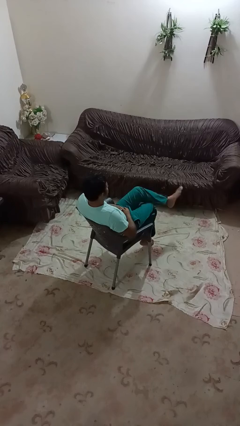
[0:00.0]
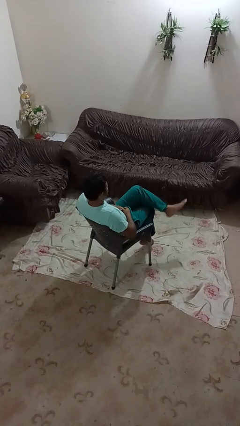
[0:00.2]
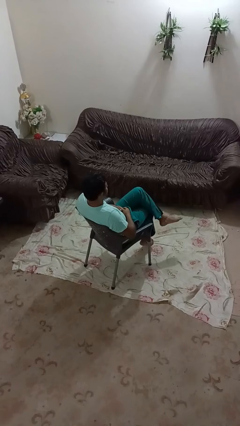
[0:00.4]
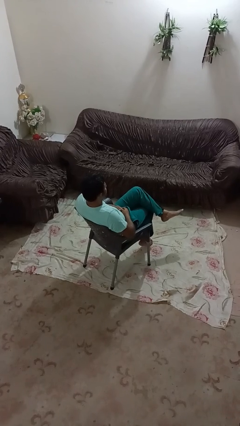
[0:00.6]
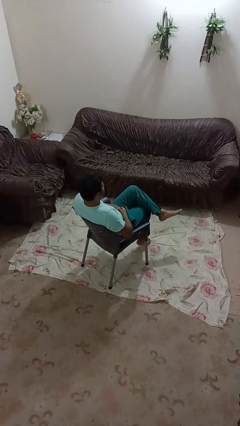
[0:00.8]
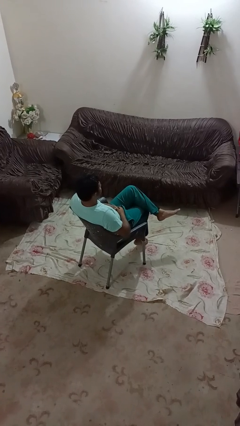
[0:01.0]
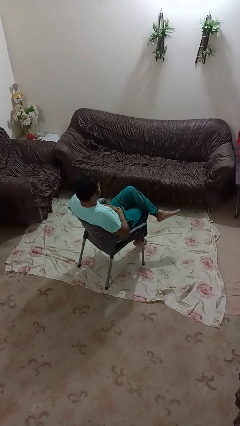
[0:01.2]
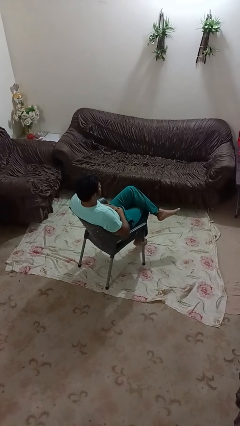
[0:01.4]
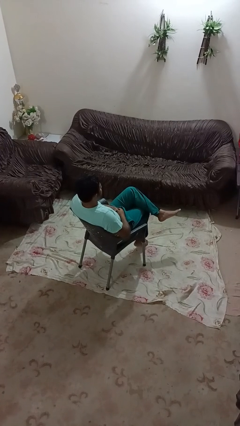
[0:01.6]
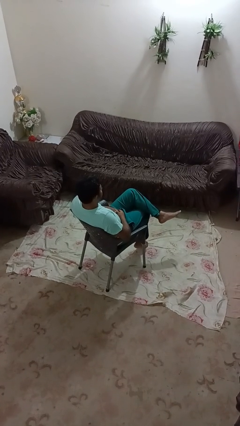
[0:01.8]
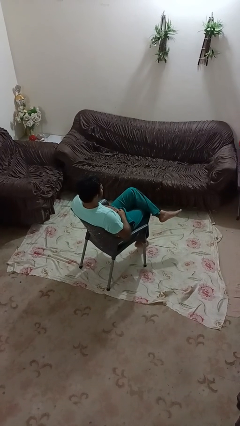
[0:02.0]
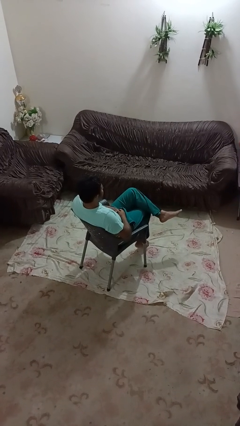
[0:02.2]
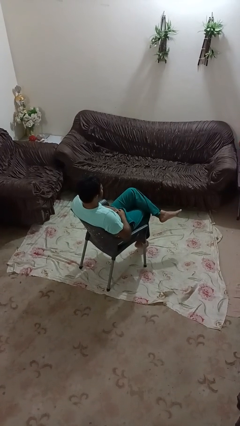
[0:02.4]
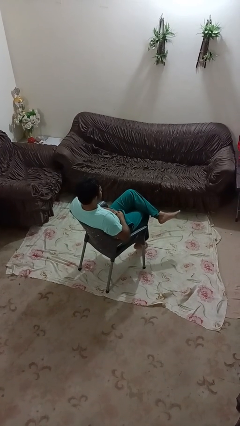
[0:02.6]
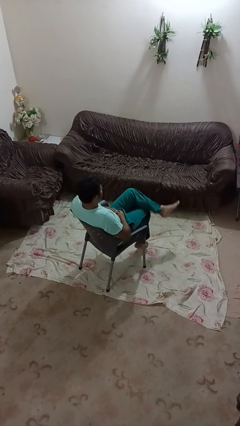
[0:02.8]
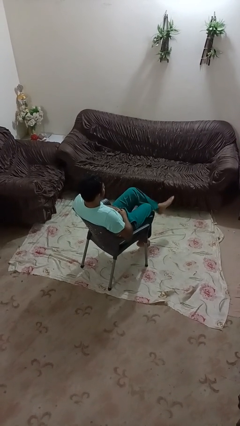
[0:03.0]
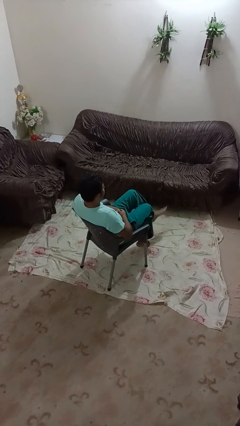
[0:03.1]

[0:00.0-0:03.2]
person crosses legs

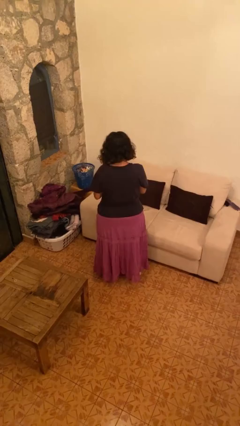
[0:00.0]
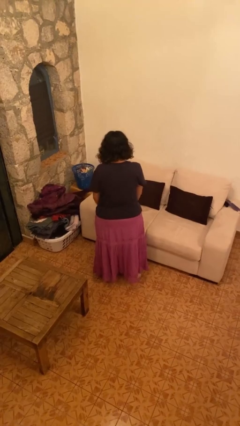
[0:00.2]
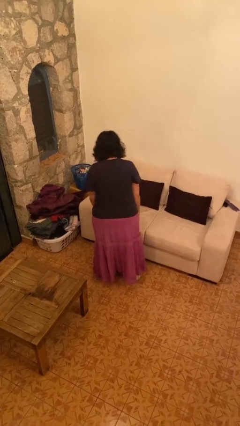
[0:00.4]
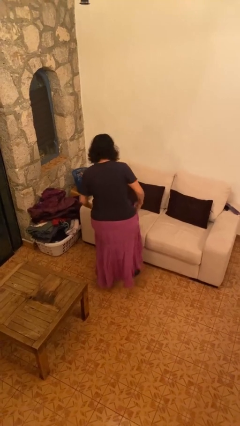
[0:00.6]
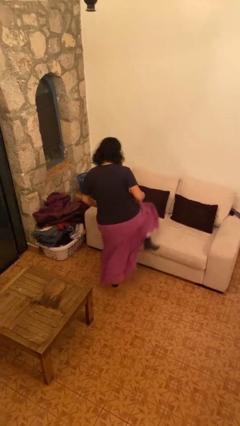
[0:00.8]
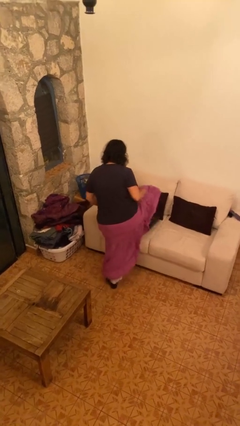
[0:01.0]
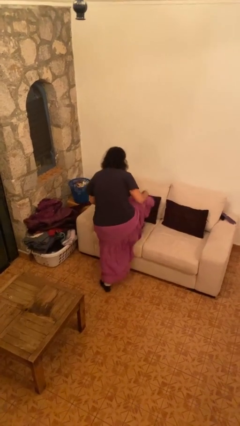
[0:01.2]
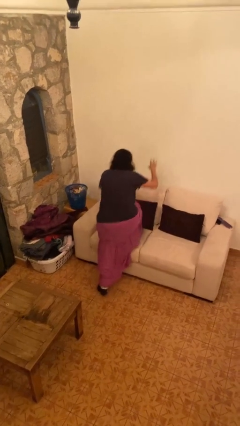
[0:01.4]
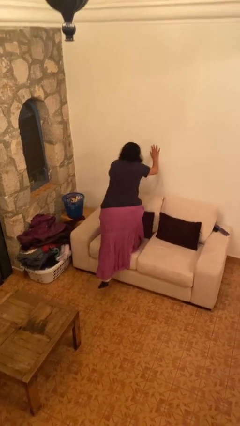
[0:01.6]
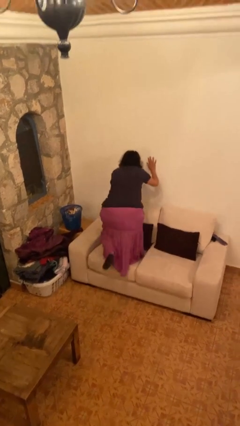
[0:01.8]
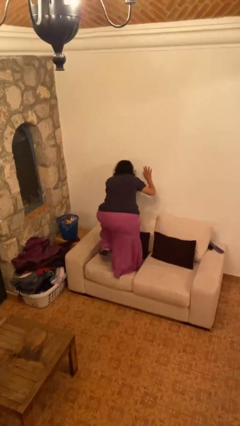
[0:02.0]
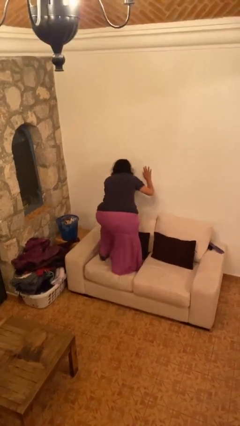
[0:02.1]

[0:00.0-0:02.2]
person climbs on couch

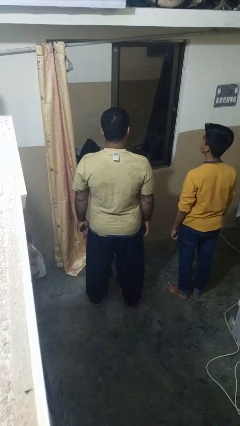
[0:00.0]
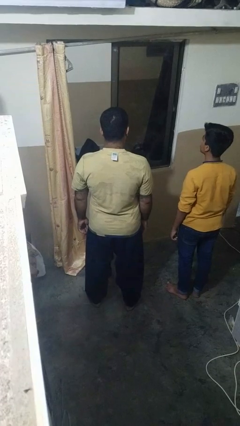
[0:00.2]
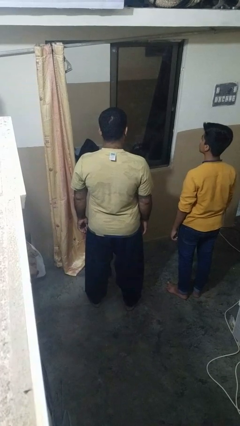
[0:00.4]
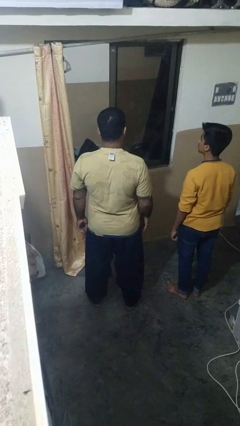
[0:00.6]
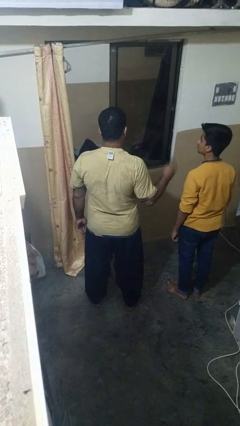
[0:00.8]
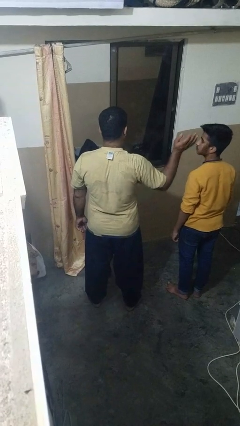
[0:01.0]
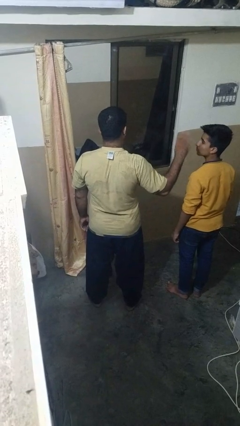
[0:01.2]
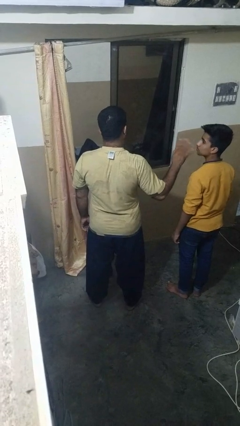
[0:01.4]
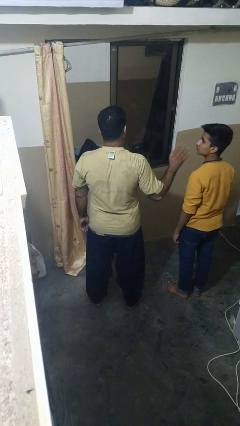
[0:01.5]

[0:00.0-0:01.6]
person waves at person

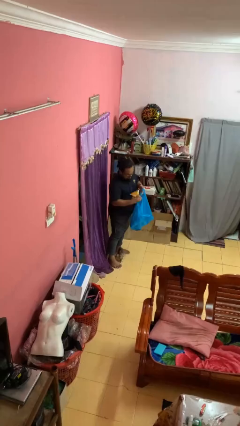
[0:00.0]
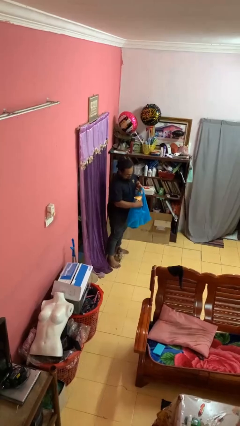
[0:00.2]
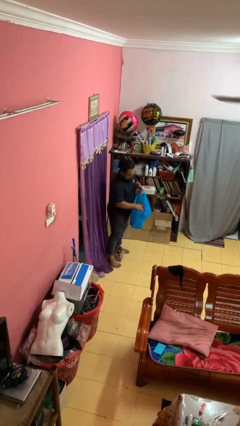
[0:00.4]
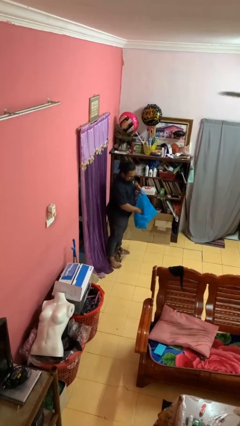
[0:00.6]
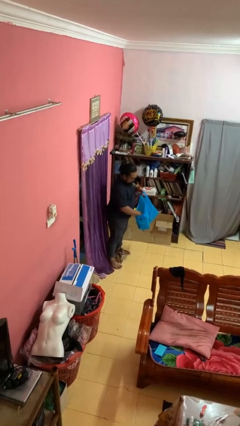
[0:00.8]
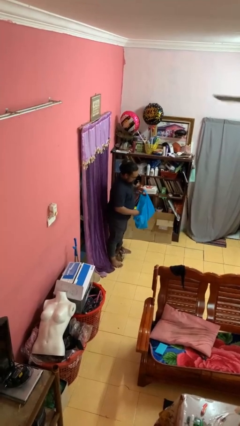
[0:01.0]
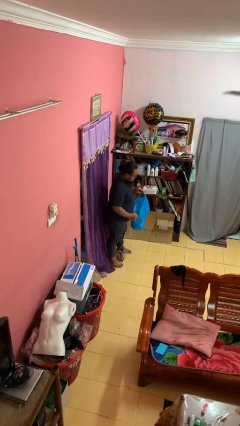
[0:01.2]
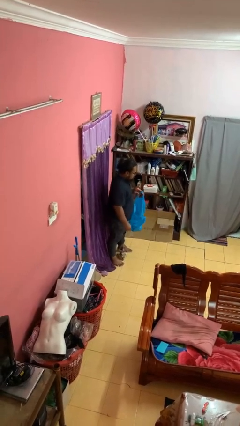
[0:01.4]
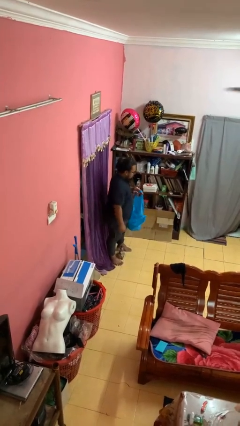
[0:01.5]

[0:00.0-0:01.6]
person puts object into bag

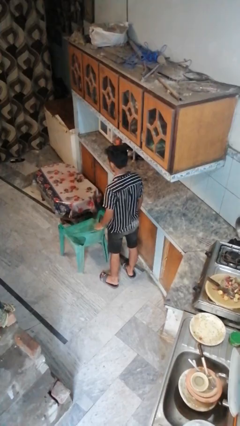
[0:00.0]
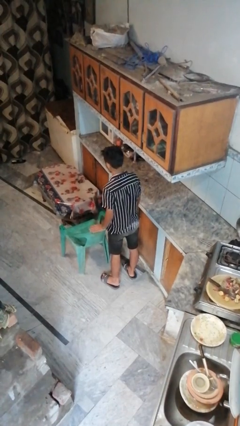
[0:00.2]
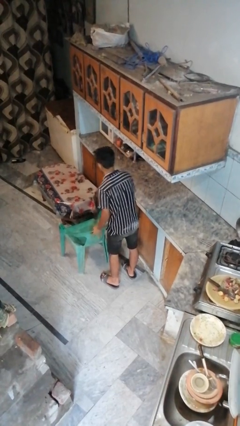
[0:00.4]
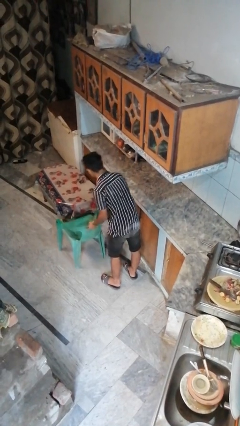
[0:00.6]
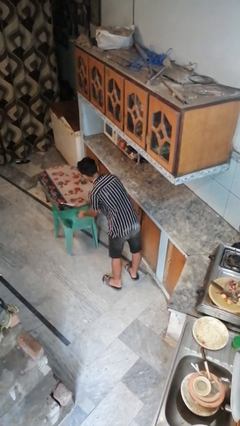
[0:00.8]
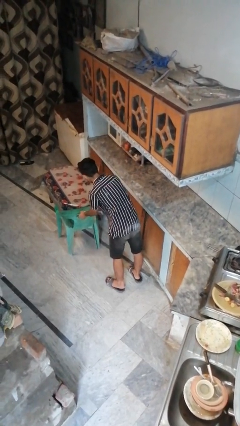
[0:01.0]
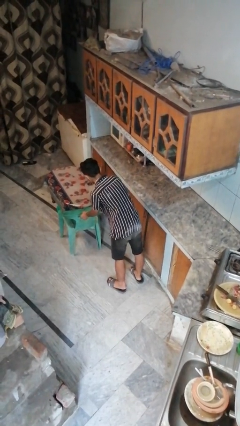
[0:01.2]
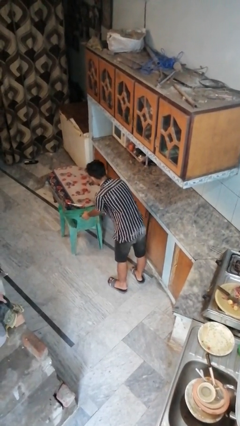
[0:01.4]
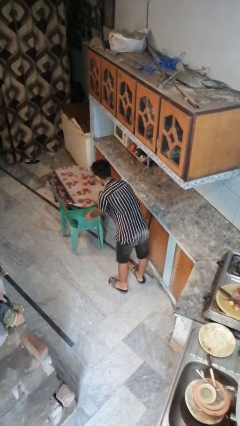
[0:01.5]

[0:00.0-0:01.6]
person pushes in chair

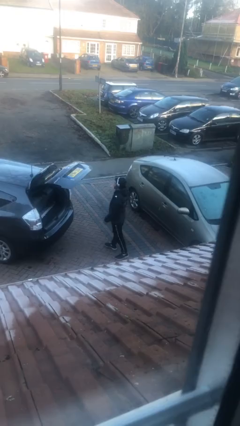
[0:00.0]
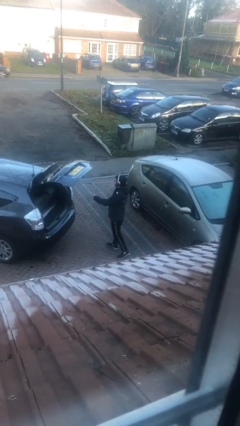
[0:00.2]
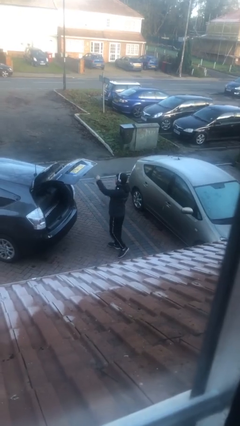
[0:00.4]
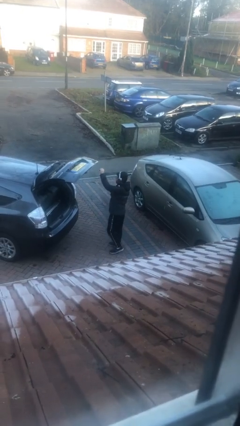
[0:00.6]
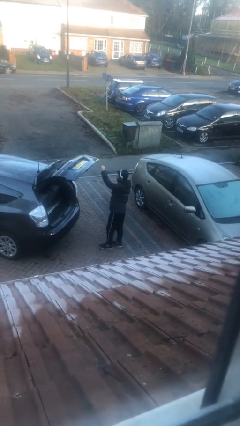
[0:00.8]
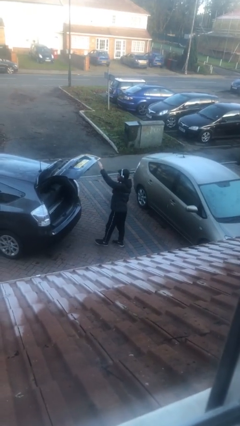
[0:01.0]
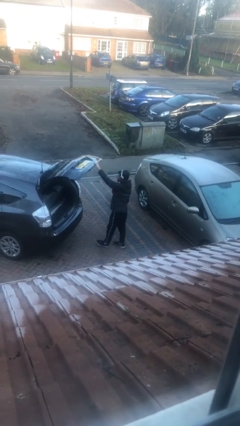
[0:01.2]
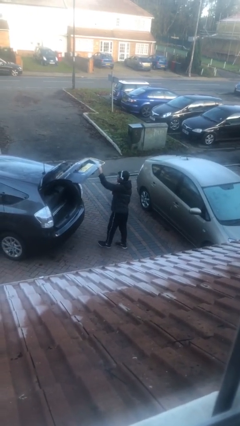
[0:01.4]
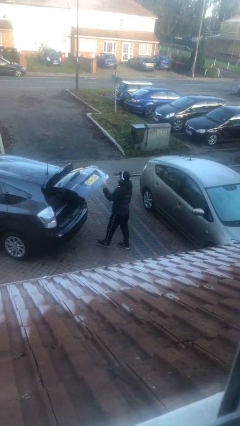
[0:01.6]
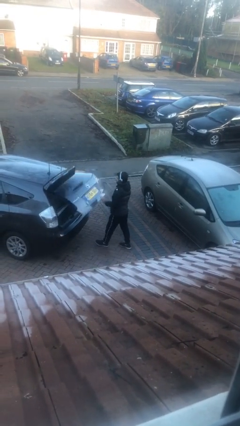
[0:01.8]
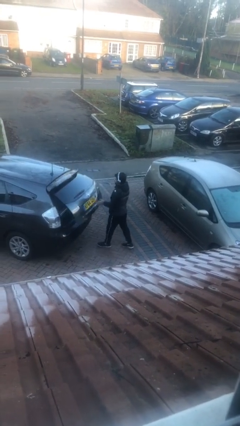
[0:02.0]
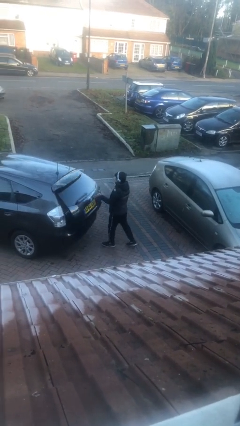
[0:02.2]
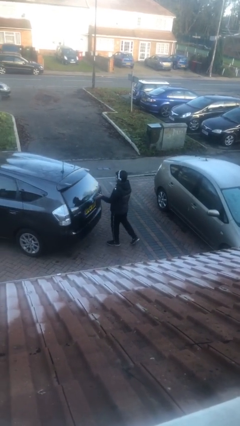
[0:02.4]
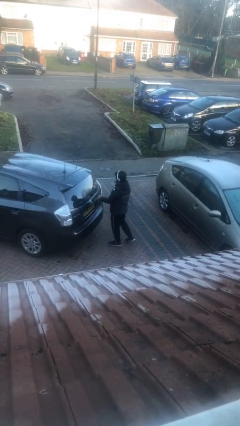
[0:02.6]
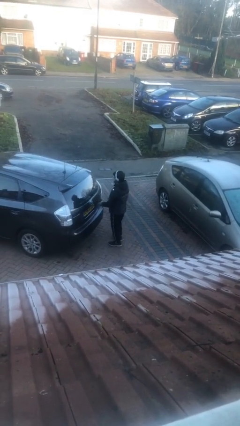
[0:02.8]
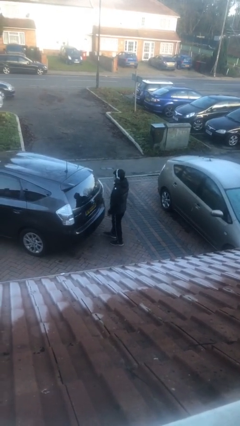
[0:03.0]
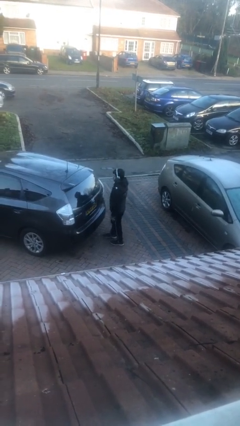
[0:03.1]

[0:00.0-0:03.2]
person closes car trunk

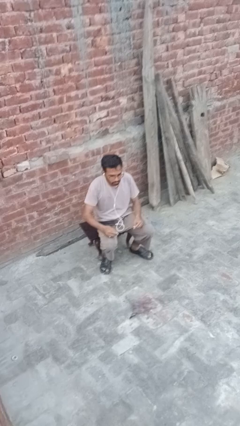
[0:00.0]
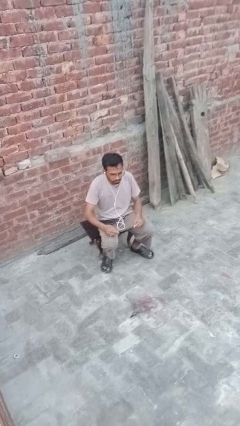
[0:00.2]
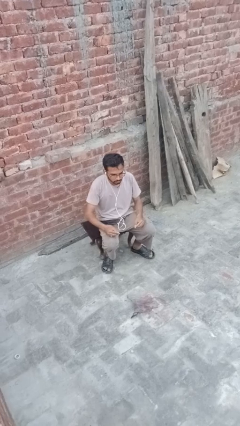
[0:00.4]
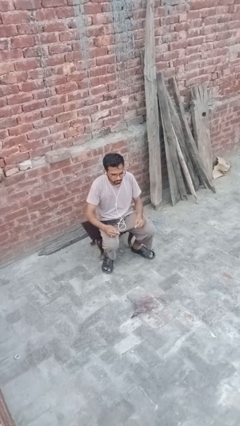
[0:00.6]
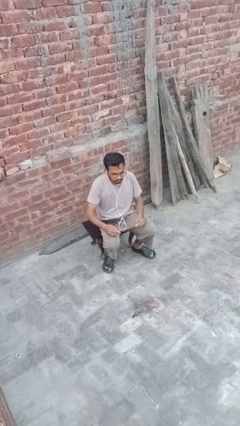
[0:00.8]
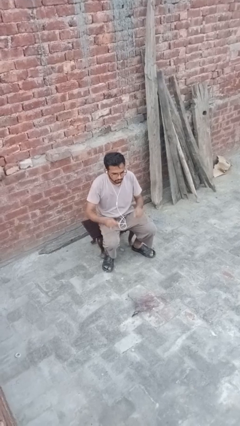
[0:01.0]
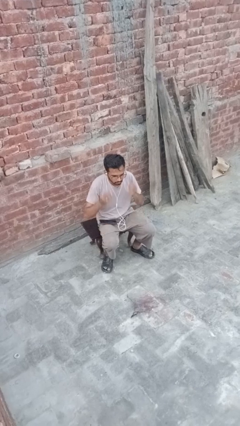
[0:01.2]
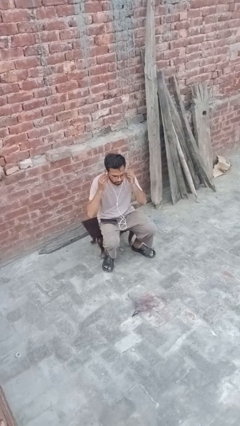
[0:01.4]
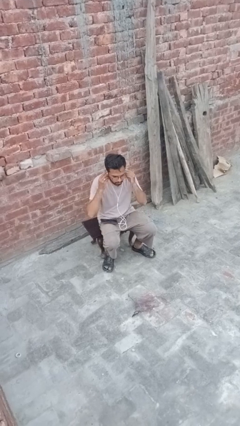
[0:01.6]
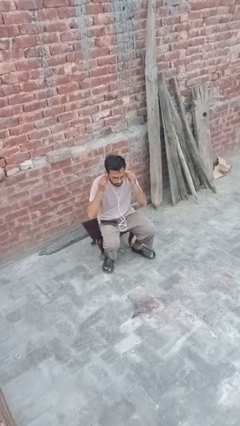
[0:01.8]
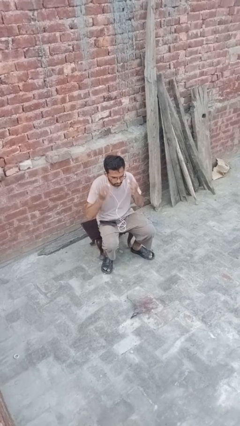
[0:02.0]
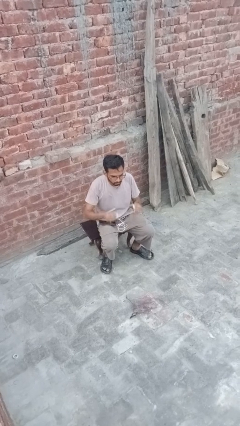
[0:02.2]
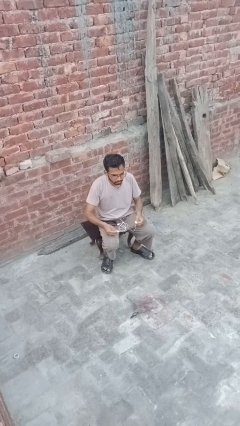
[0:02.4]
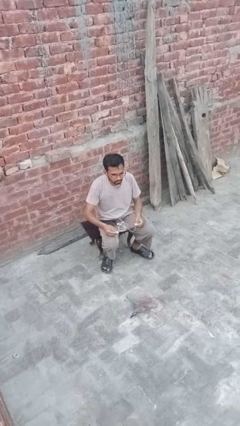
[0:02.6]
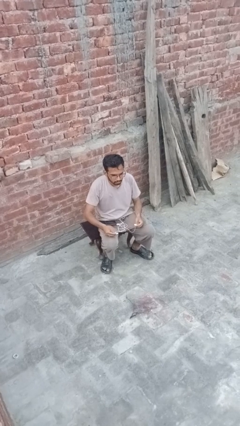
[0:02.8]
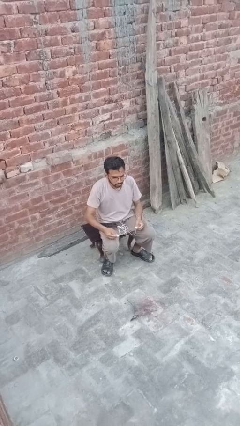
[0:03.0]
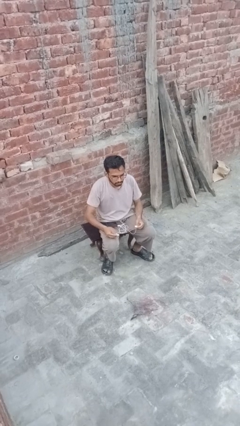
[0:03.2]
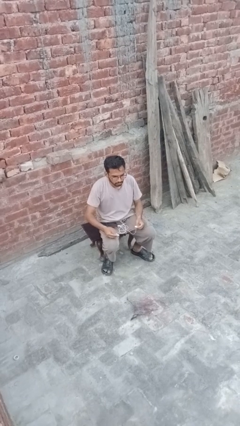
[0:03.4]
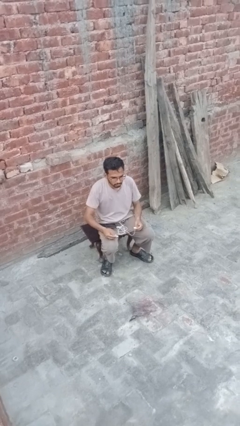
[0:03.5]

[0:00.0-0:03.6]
person takes off headphones

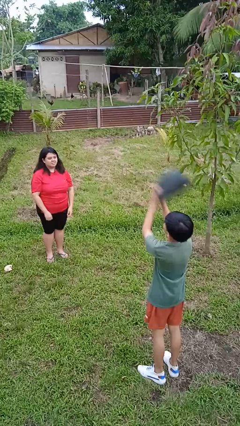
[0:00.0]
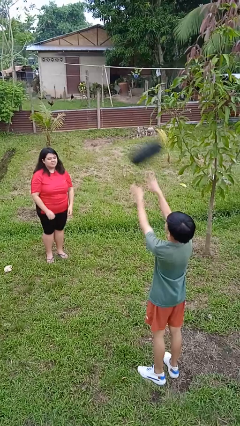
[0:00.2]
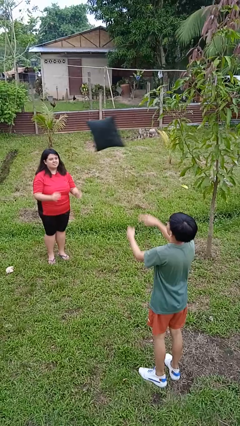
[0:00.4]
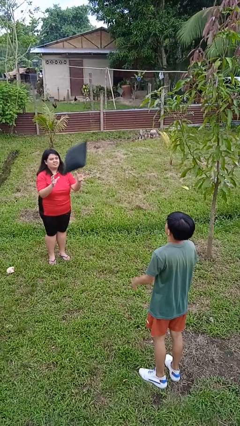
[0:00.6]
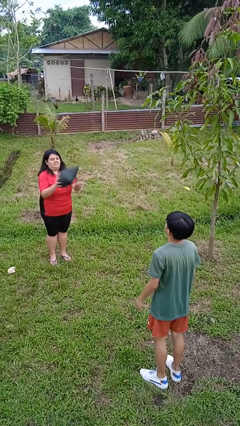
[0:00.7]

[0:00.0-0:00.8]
person catches object from person
